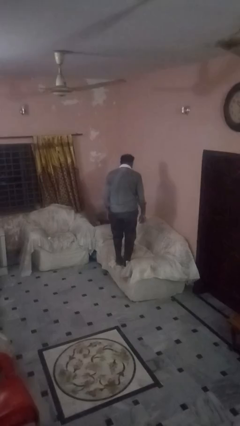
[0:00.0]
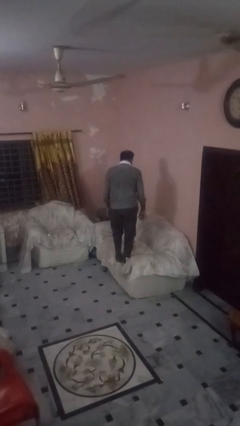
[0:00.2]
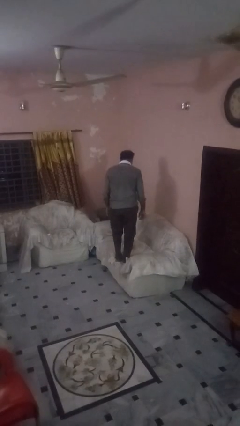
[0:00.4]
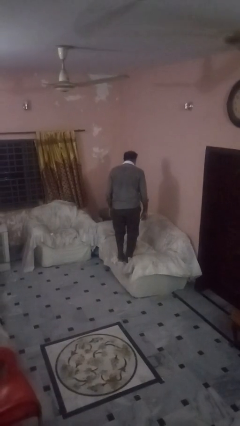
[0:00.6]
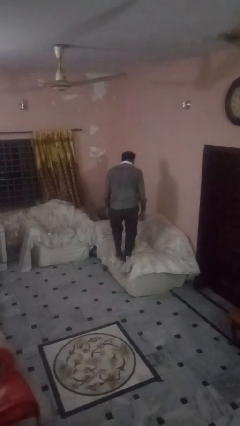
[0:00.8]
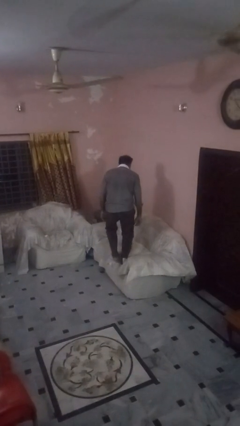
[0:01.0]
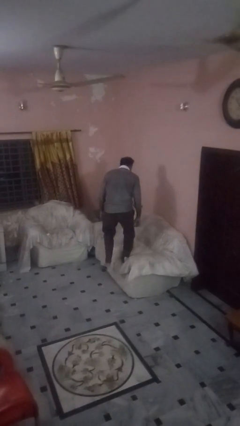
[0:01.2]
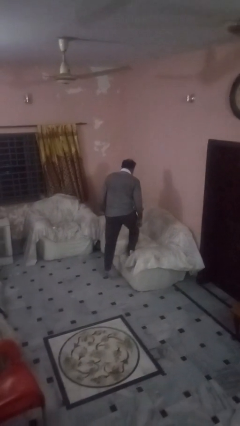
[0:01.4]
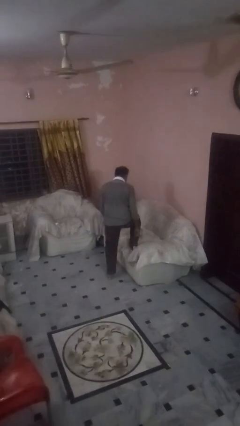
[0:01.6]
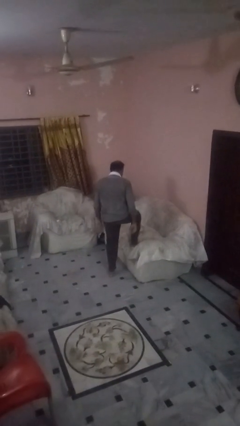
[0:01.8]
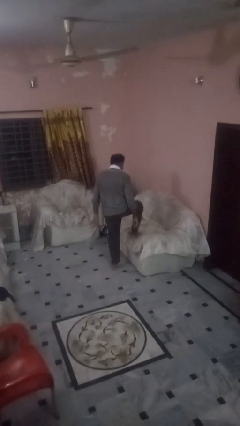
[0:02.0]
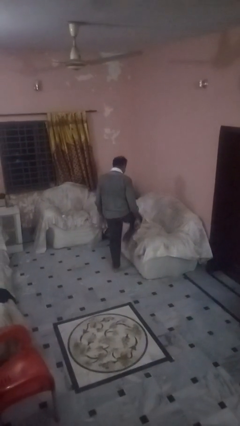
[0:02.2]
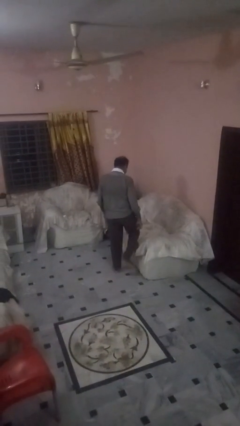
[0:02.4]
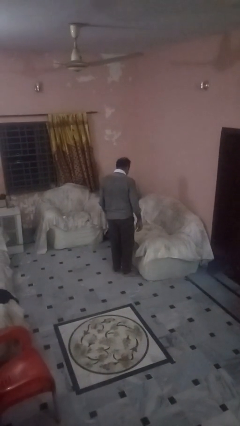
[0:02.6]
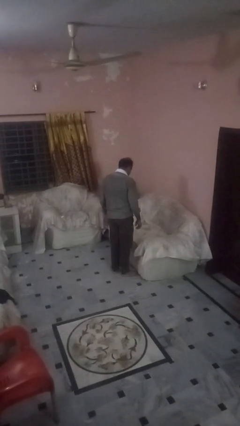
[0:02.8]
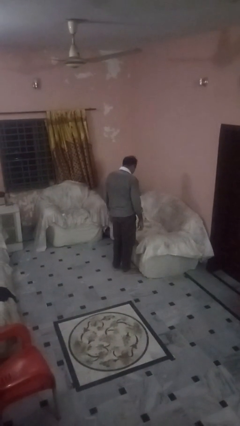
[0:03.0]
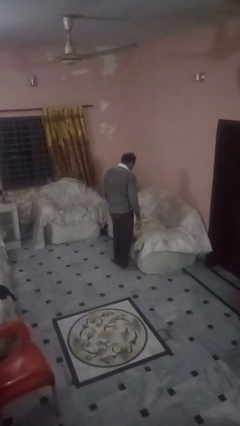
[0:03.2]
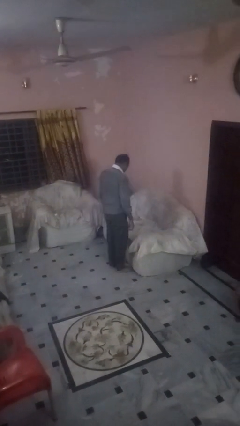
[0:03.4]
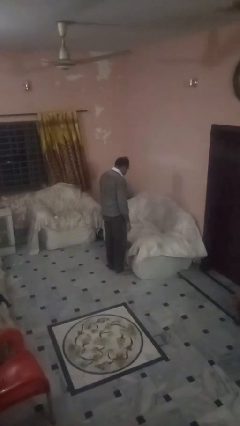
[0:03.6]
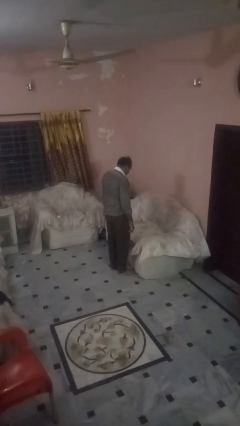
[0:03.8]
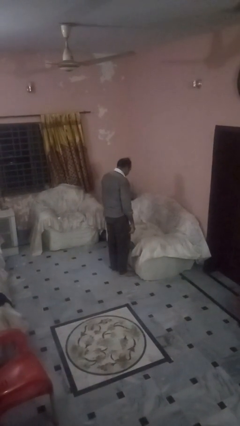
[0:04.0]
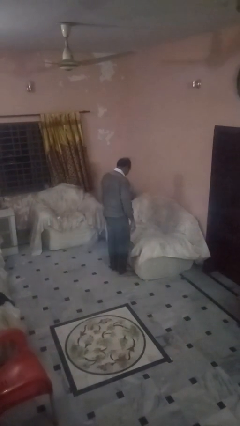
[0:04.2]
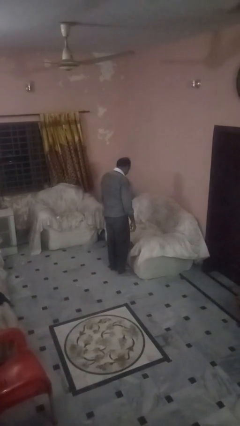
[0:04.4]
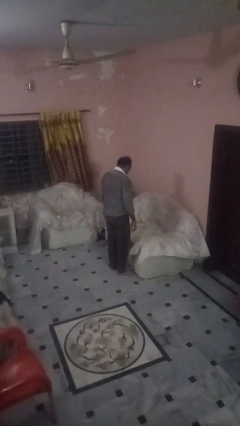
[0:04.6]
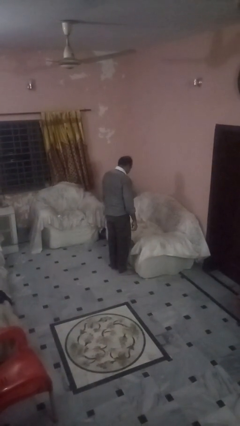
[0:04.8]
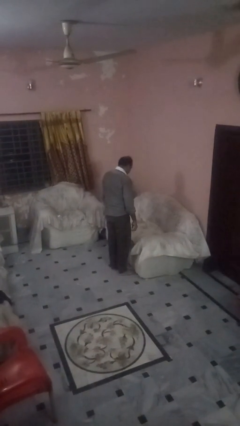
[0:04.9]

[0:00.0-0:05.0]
person climbs off couch

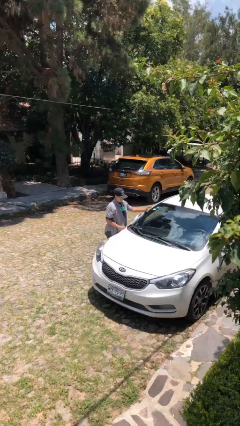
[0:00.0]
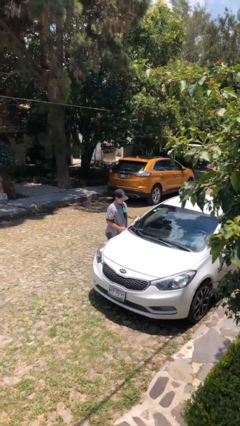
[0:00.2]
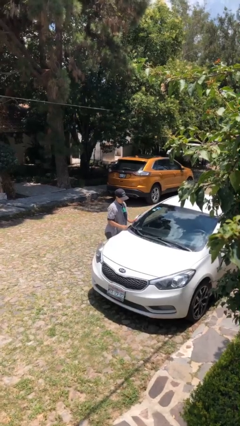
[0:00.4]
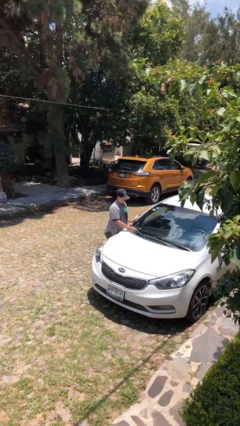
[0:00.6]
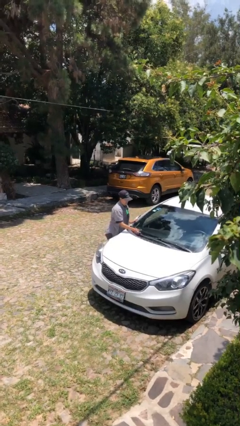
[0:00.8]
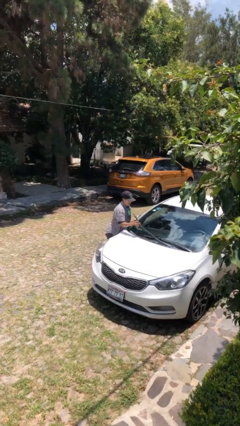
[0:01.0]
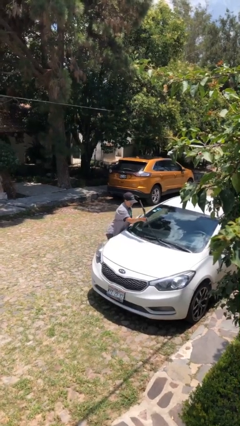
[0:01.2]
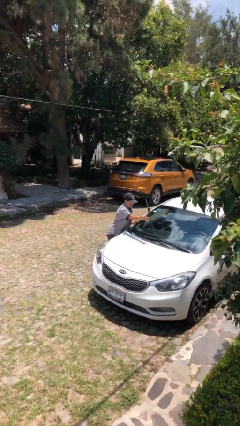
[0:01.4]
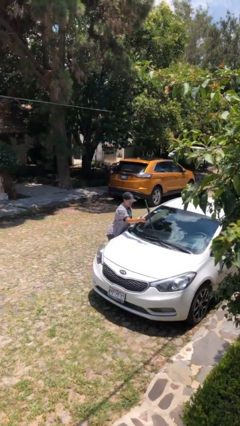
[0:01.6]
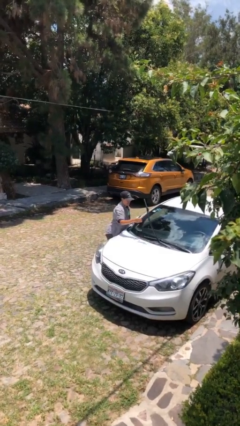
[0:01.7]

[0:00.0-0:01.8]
person flips up car wipers

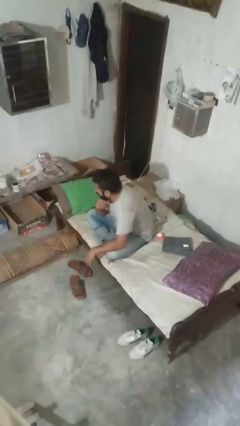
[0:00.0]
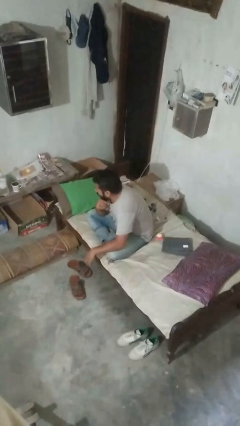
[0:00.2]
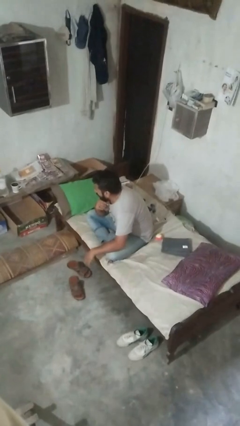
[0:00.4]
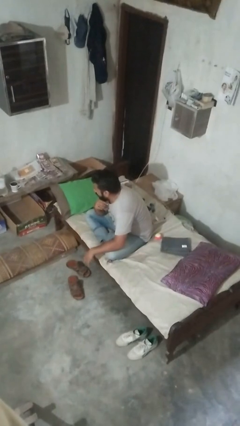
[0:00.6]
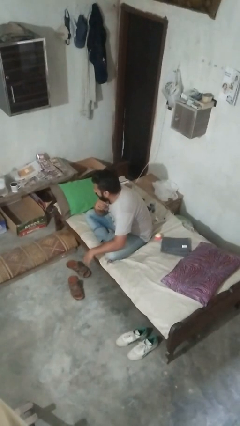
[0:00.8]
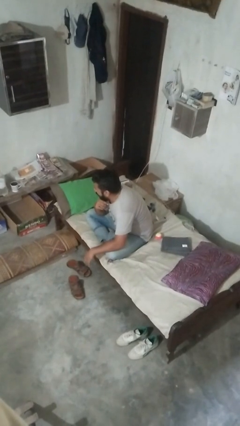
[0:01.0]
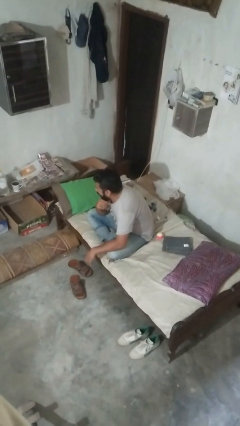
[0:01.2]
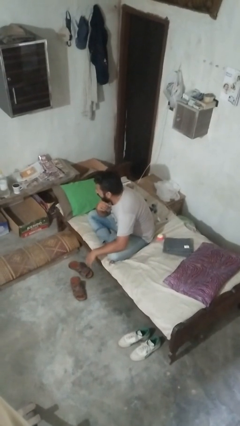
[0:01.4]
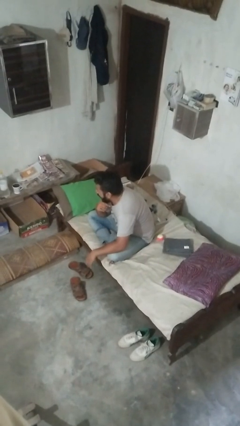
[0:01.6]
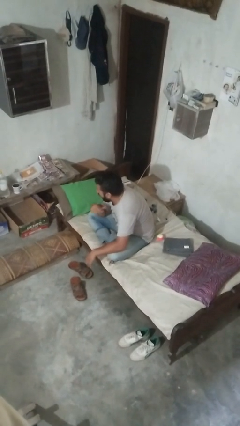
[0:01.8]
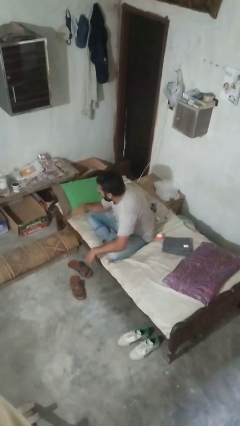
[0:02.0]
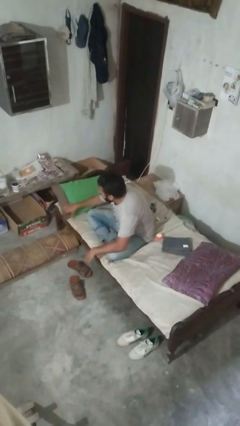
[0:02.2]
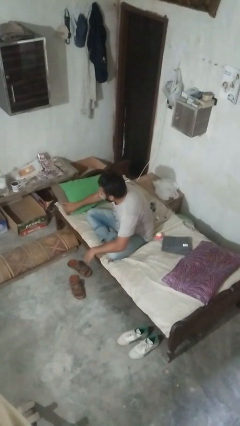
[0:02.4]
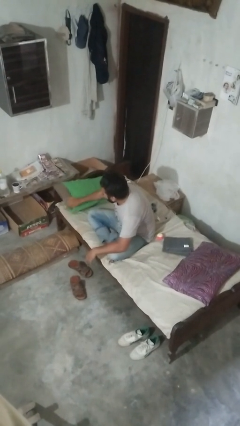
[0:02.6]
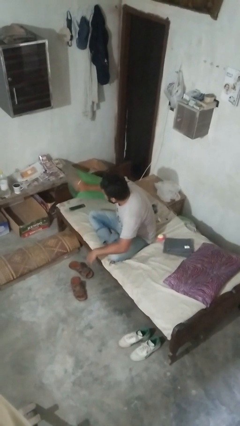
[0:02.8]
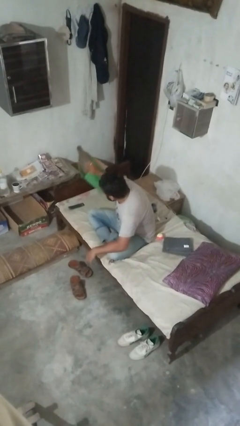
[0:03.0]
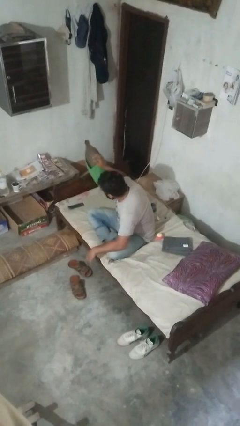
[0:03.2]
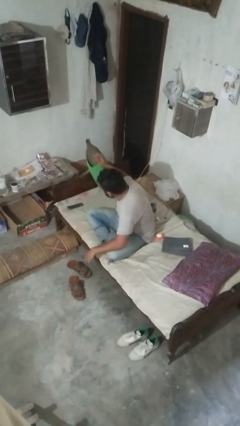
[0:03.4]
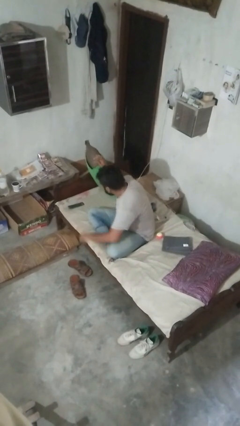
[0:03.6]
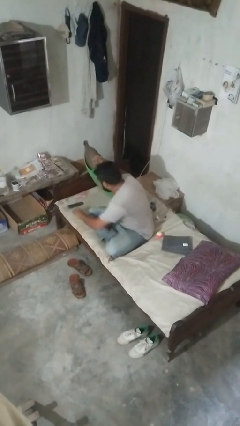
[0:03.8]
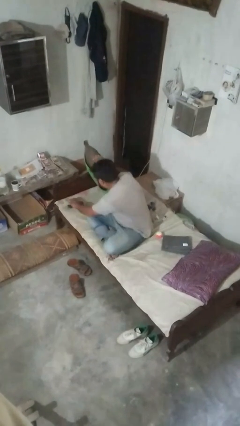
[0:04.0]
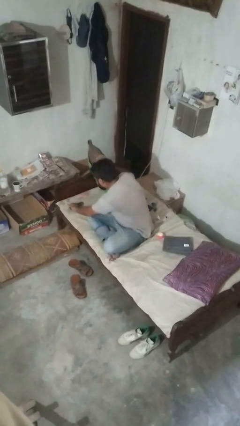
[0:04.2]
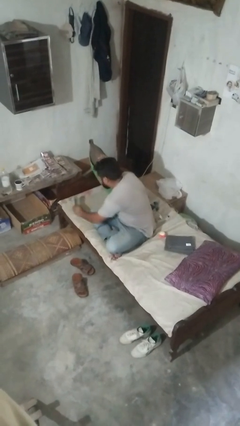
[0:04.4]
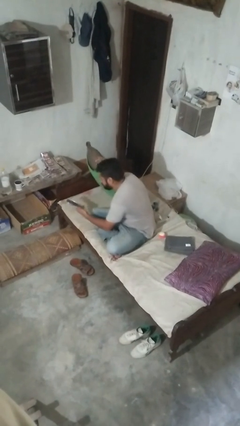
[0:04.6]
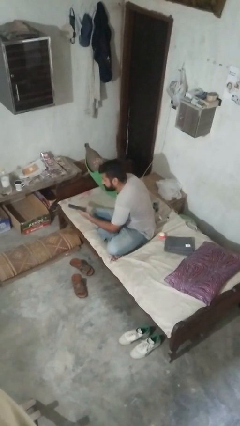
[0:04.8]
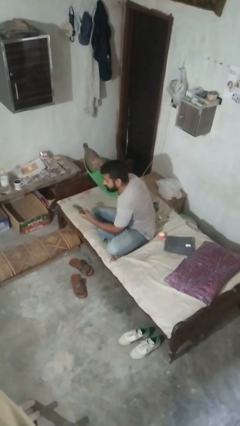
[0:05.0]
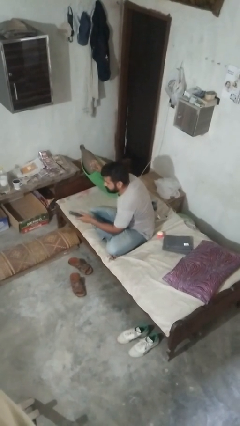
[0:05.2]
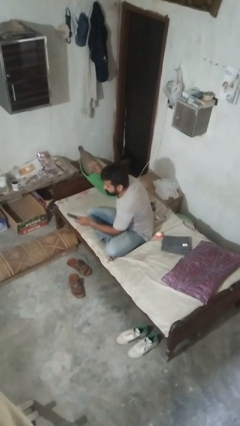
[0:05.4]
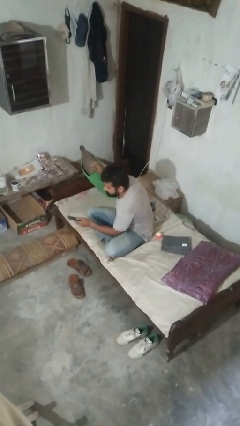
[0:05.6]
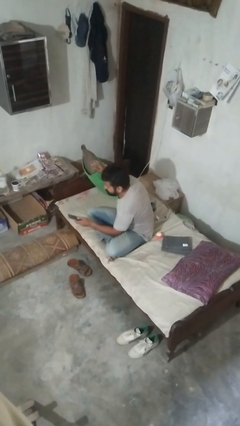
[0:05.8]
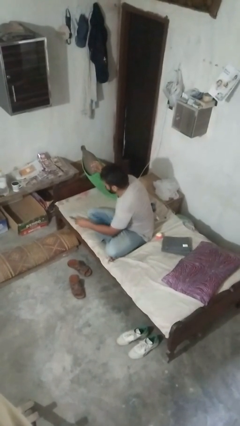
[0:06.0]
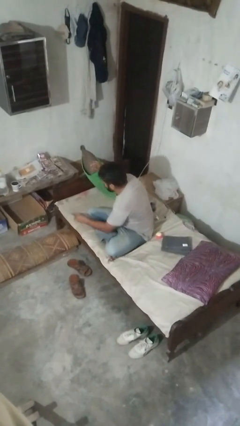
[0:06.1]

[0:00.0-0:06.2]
person searches in couch

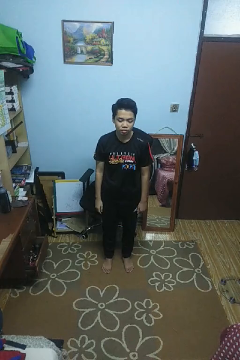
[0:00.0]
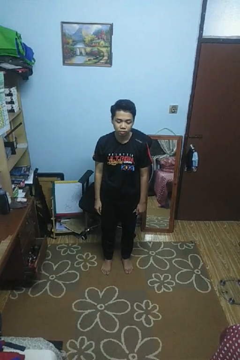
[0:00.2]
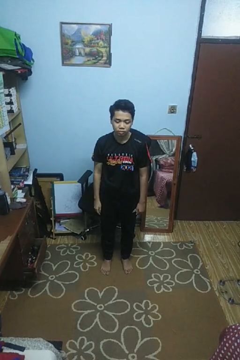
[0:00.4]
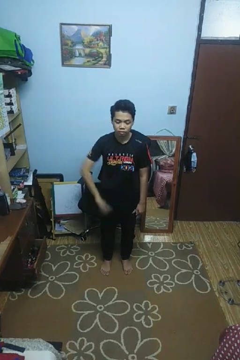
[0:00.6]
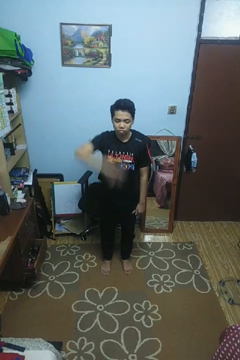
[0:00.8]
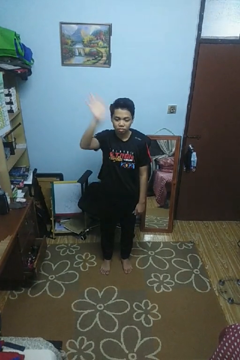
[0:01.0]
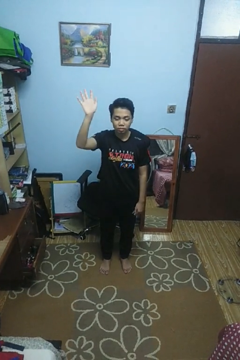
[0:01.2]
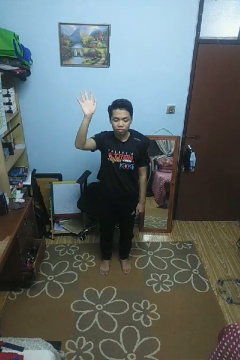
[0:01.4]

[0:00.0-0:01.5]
person gestures swipe up

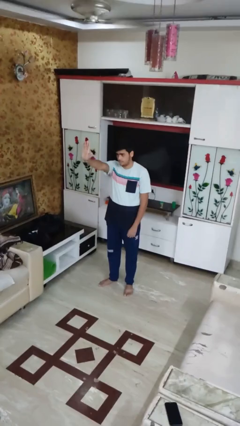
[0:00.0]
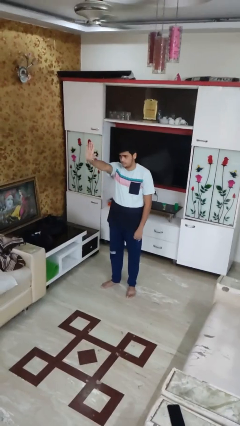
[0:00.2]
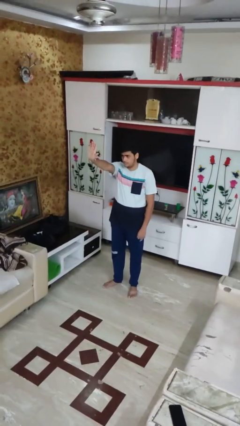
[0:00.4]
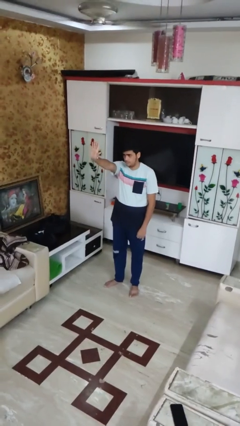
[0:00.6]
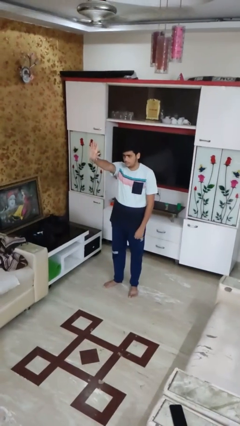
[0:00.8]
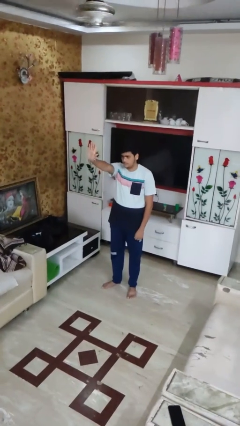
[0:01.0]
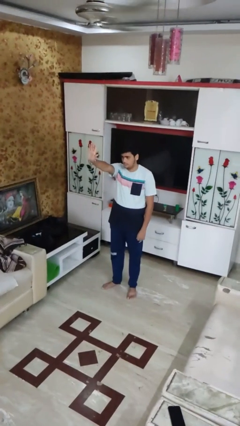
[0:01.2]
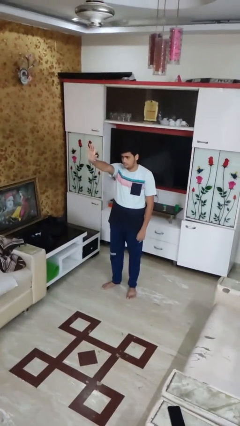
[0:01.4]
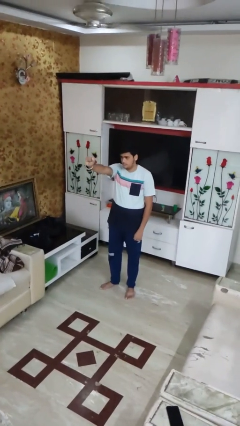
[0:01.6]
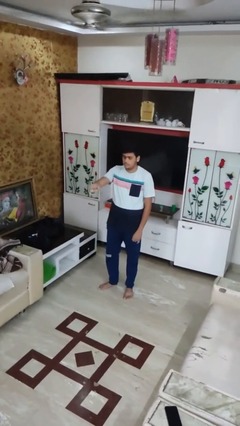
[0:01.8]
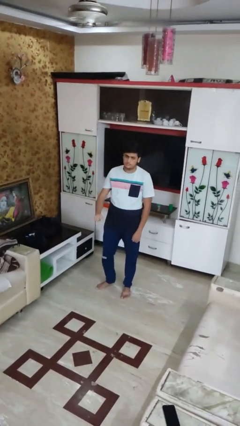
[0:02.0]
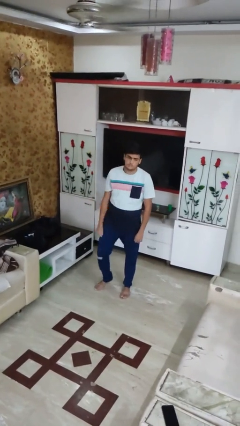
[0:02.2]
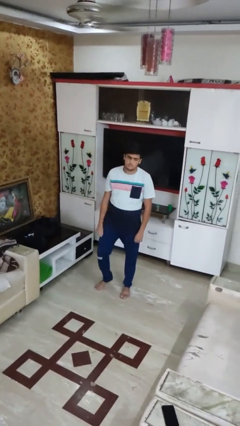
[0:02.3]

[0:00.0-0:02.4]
person gestures stop

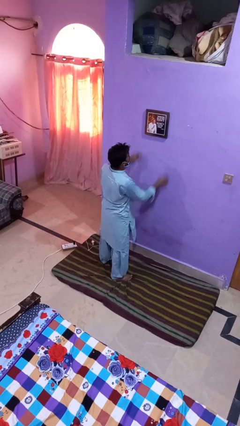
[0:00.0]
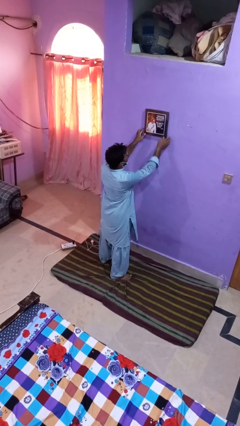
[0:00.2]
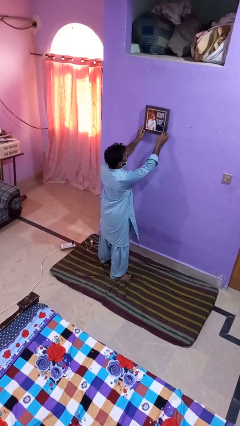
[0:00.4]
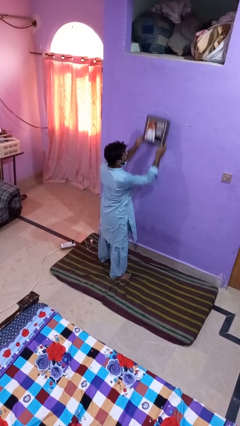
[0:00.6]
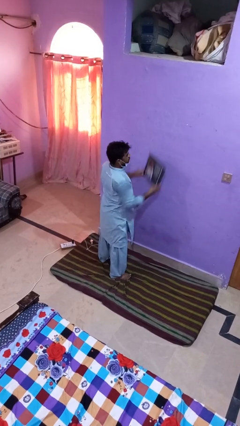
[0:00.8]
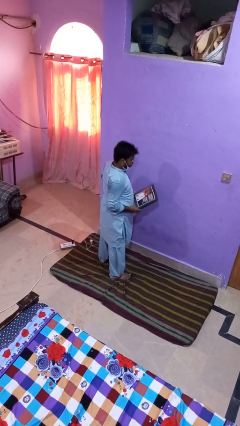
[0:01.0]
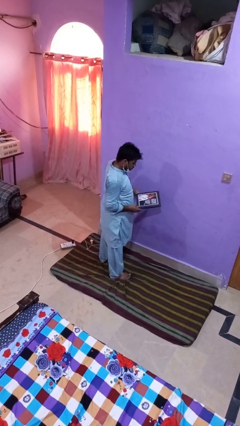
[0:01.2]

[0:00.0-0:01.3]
person takes down picture frame
